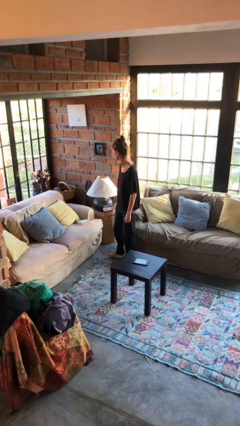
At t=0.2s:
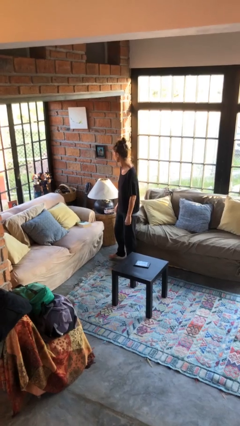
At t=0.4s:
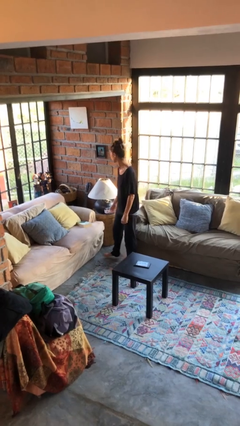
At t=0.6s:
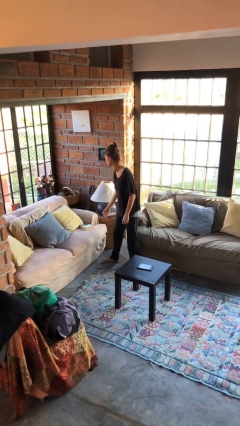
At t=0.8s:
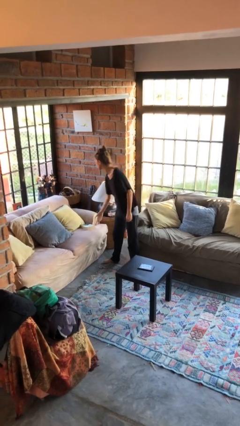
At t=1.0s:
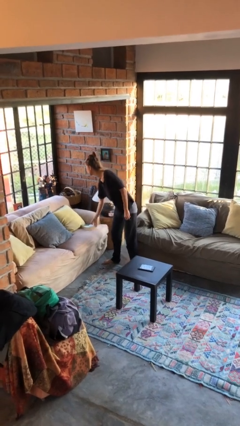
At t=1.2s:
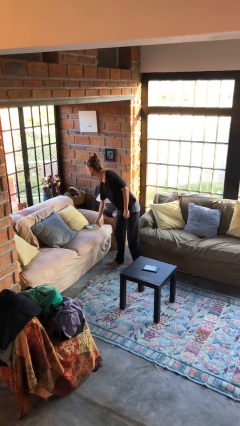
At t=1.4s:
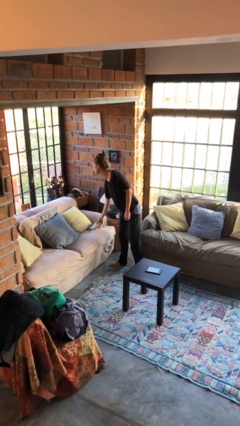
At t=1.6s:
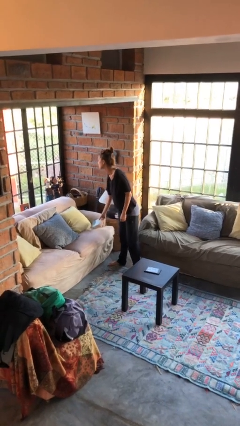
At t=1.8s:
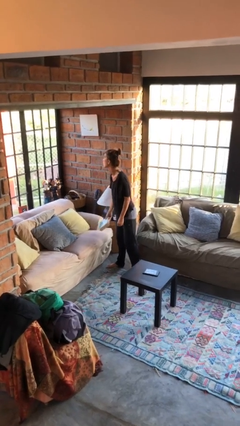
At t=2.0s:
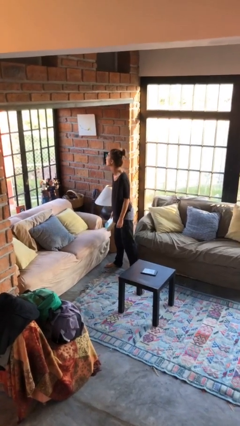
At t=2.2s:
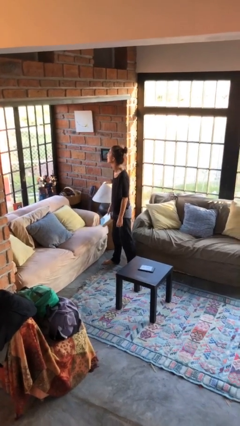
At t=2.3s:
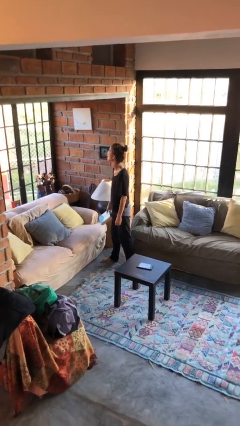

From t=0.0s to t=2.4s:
person picks up object from couch

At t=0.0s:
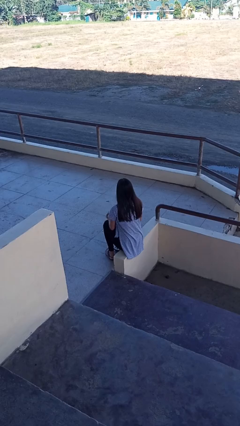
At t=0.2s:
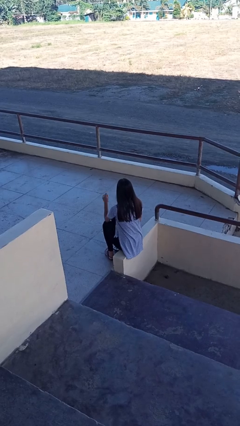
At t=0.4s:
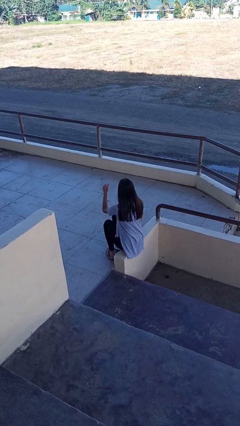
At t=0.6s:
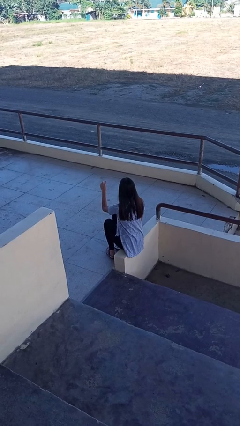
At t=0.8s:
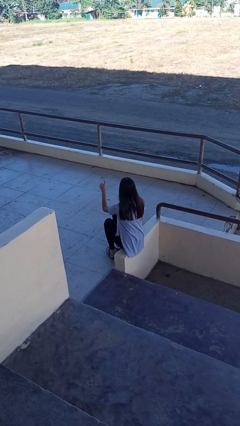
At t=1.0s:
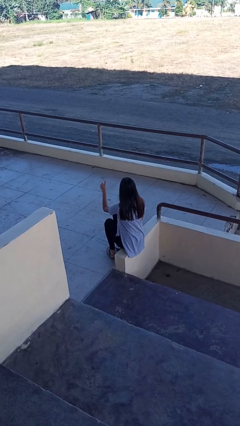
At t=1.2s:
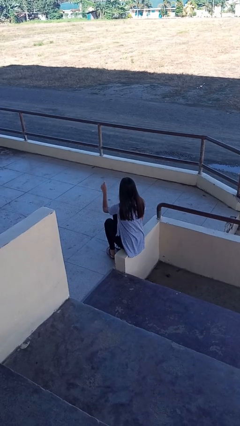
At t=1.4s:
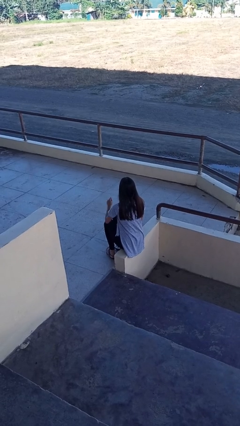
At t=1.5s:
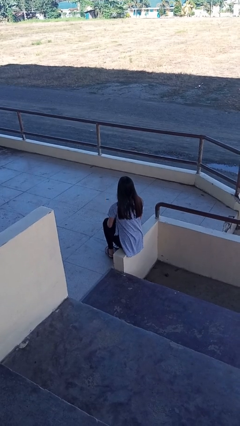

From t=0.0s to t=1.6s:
person gestures number one

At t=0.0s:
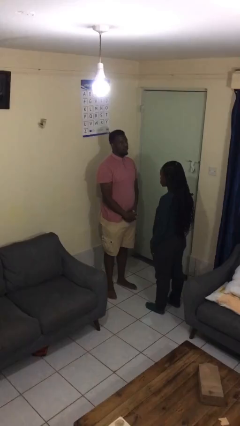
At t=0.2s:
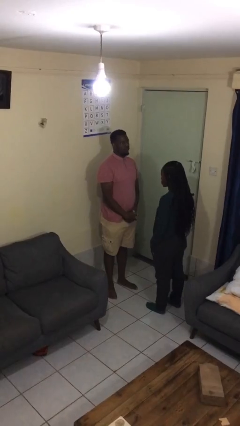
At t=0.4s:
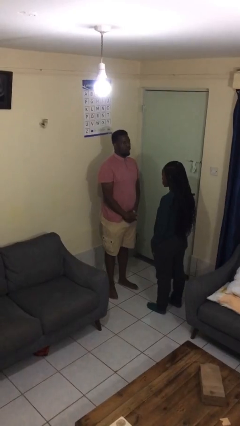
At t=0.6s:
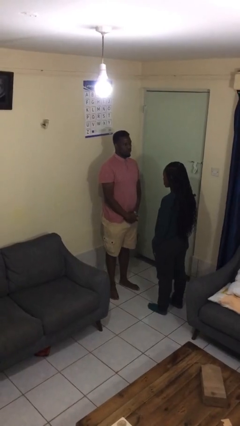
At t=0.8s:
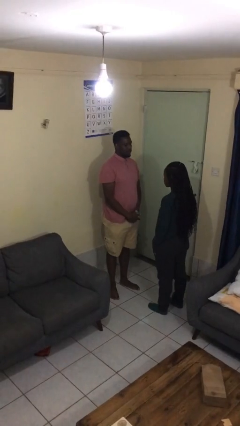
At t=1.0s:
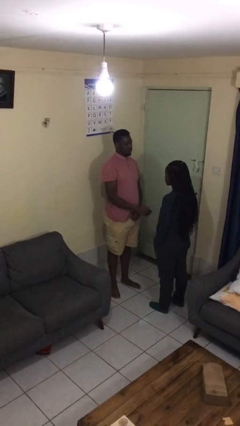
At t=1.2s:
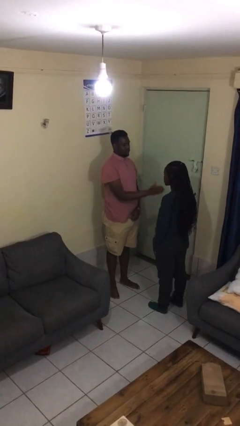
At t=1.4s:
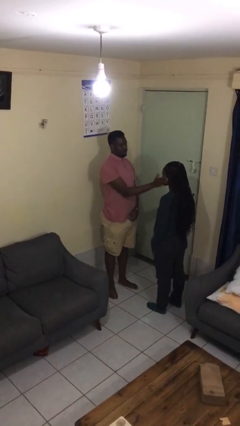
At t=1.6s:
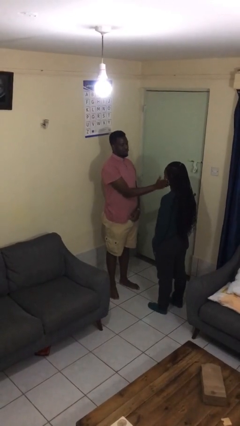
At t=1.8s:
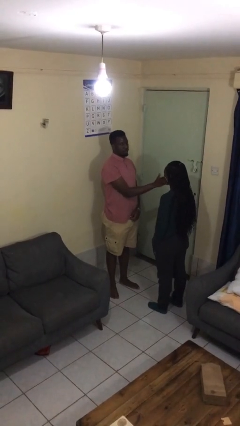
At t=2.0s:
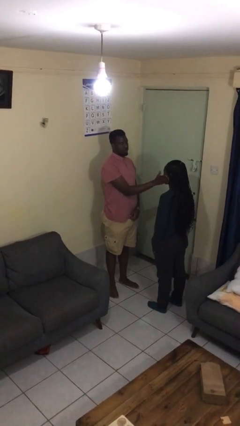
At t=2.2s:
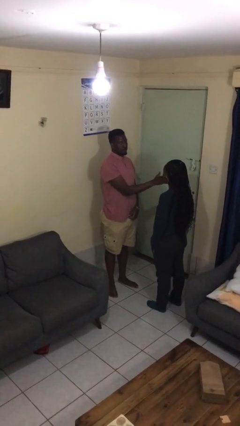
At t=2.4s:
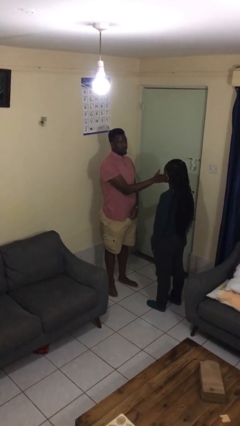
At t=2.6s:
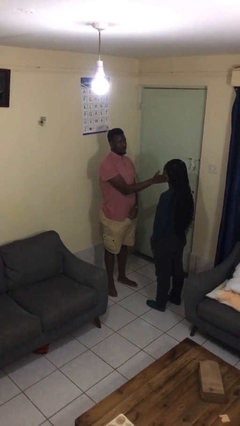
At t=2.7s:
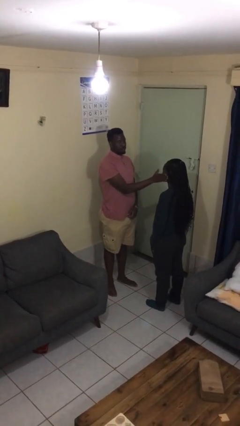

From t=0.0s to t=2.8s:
person touches face of person

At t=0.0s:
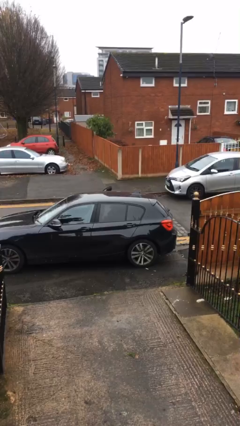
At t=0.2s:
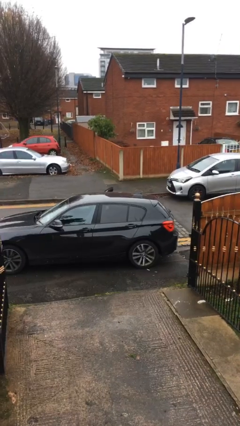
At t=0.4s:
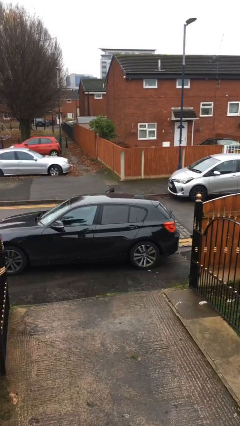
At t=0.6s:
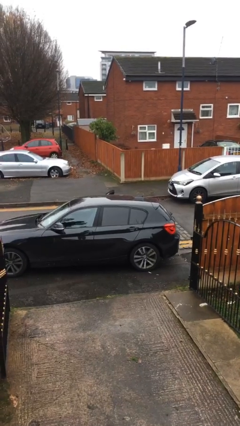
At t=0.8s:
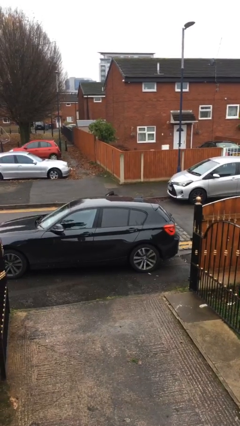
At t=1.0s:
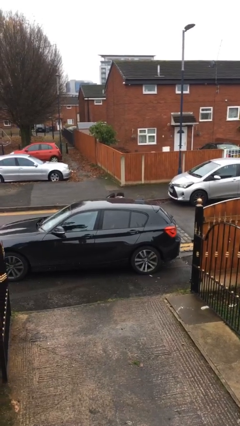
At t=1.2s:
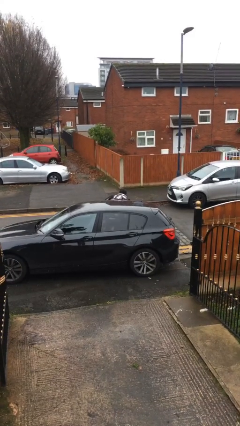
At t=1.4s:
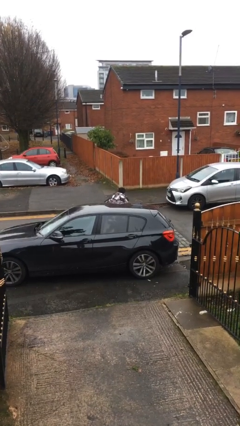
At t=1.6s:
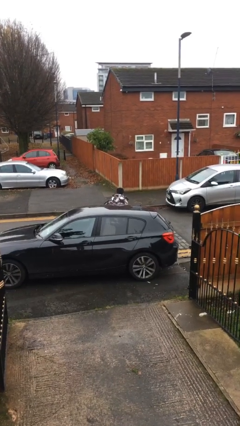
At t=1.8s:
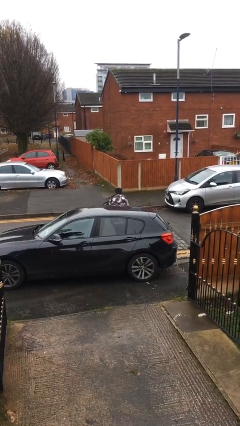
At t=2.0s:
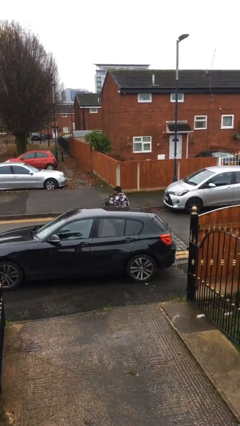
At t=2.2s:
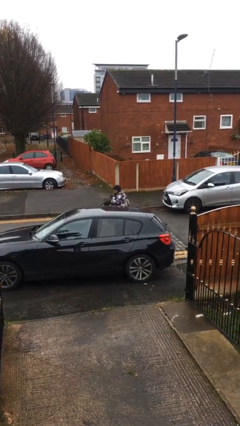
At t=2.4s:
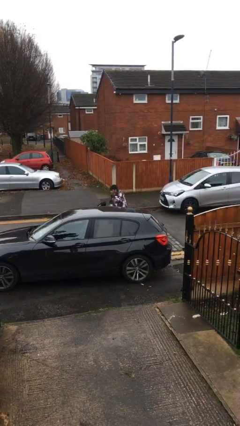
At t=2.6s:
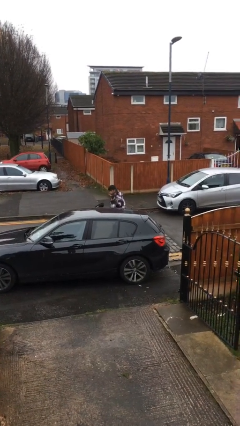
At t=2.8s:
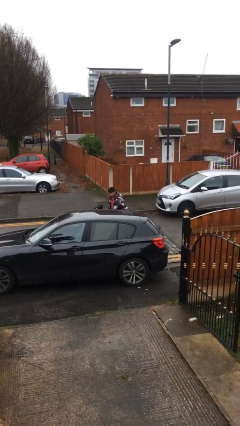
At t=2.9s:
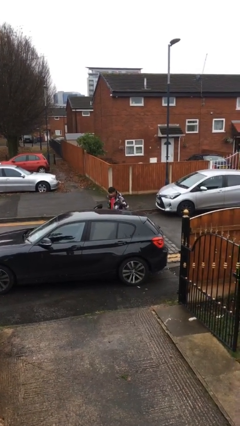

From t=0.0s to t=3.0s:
person exits car

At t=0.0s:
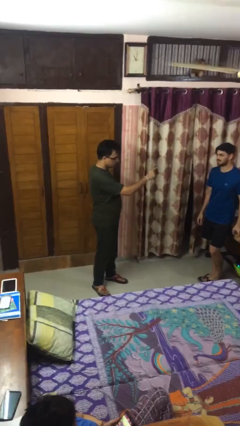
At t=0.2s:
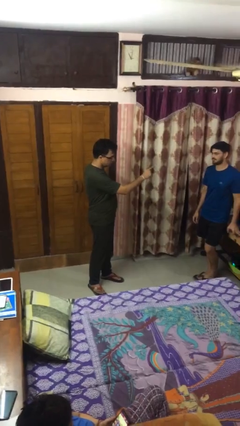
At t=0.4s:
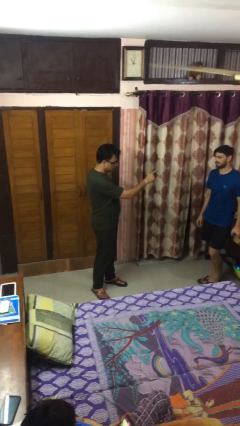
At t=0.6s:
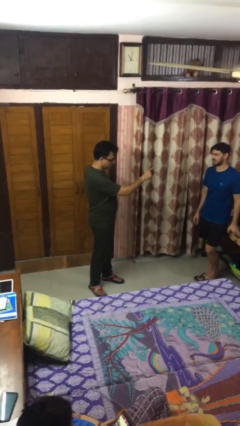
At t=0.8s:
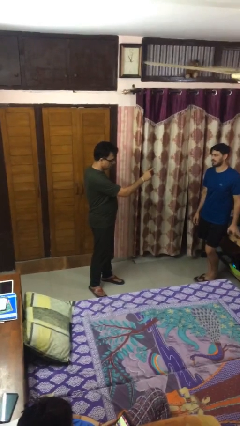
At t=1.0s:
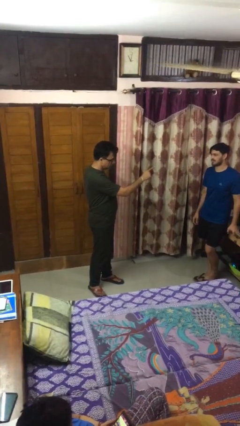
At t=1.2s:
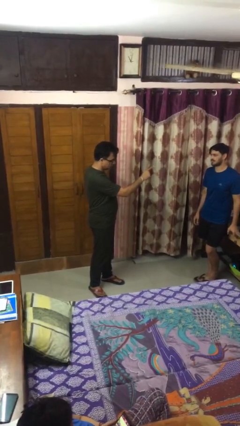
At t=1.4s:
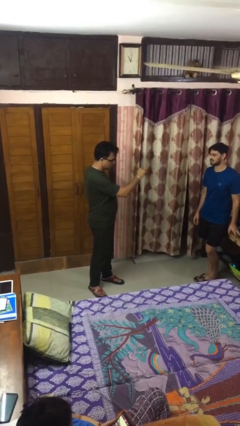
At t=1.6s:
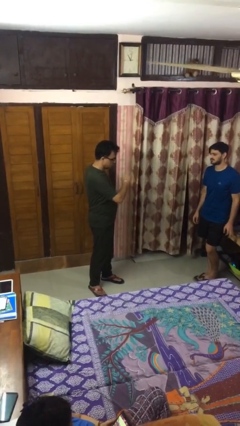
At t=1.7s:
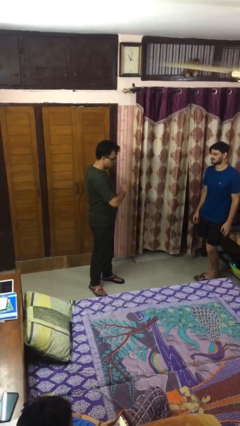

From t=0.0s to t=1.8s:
person points at person

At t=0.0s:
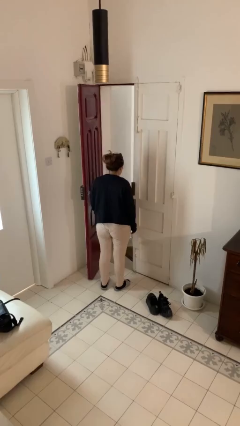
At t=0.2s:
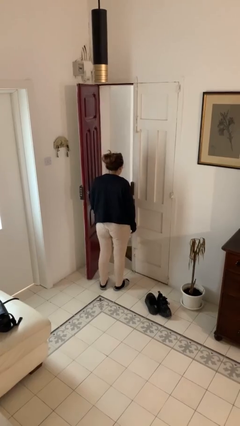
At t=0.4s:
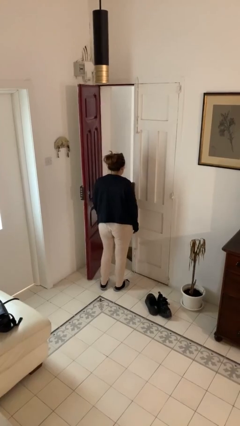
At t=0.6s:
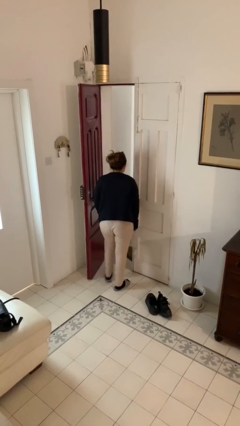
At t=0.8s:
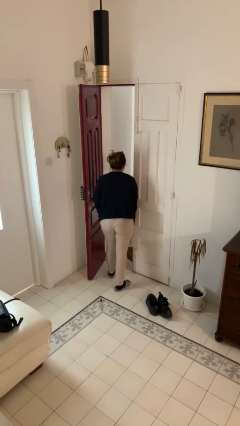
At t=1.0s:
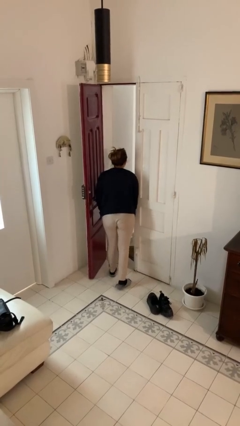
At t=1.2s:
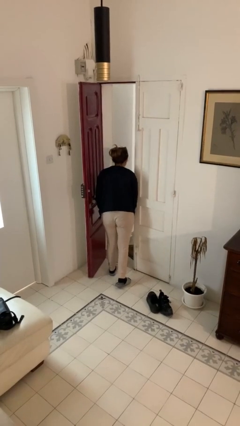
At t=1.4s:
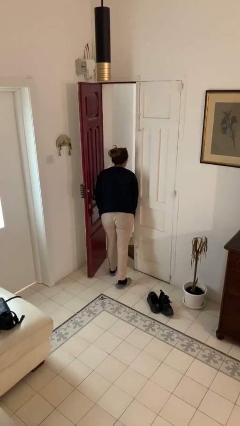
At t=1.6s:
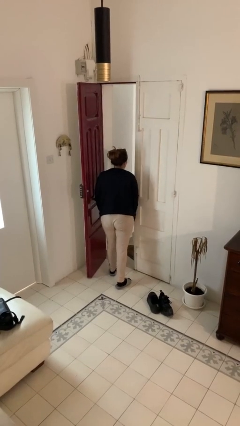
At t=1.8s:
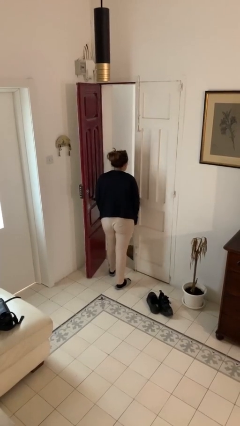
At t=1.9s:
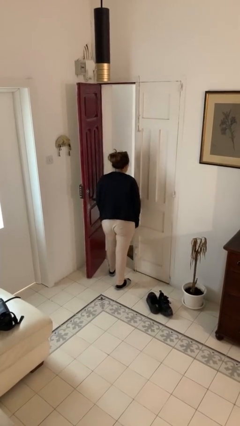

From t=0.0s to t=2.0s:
person bumps into wall

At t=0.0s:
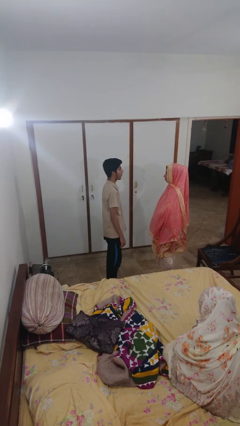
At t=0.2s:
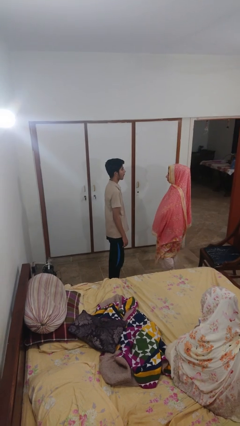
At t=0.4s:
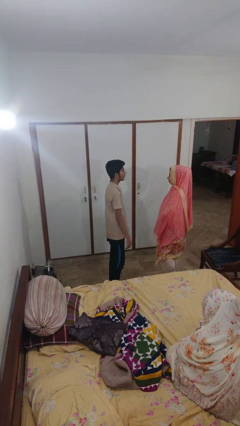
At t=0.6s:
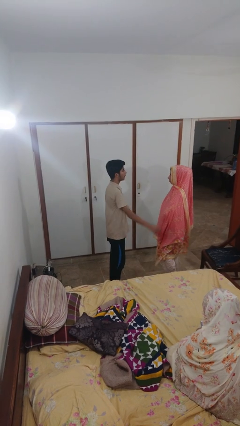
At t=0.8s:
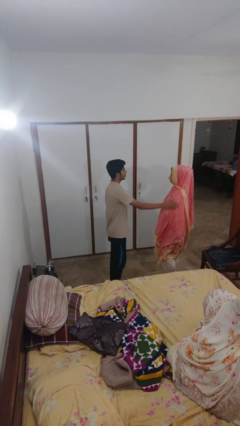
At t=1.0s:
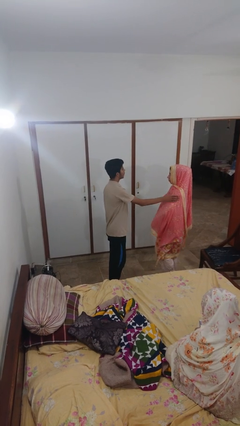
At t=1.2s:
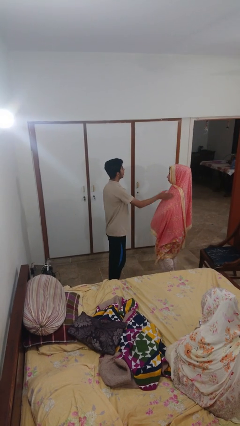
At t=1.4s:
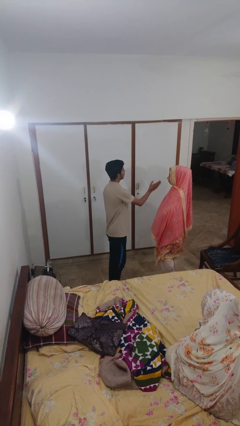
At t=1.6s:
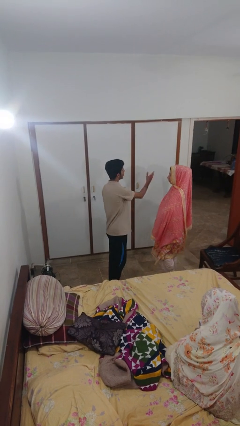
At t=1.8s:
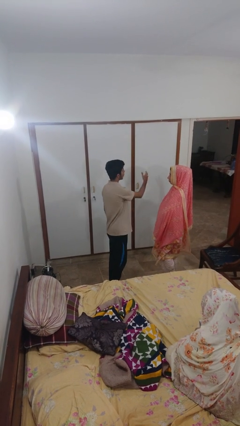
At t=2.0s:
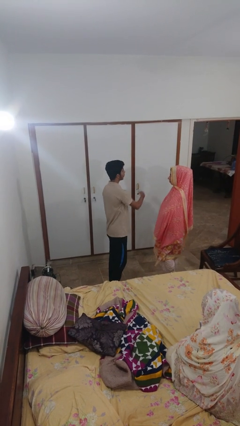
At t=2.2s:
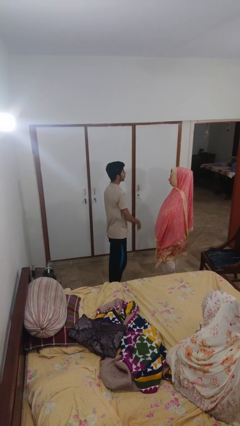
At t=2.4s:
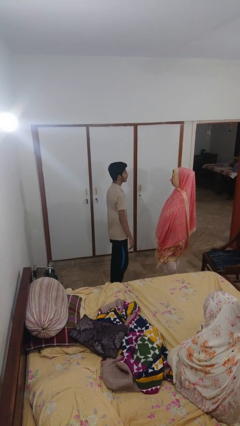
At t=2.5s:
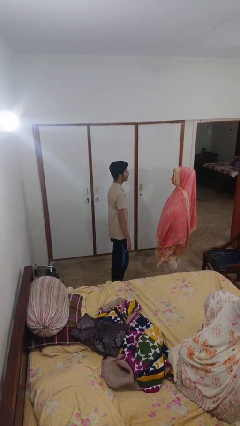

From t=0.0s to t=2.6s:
person shoves person

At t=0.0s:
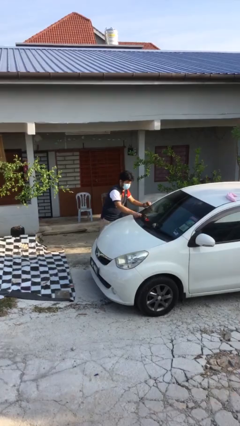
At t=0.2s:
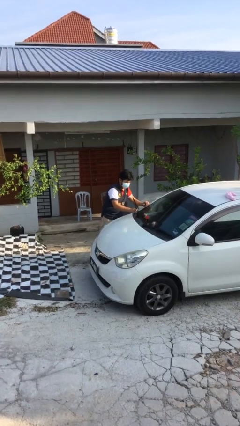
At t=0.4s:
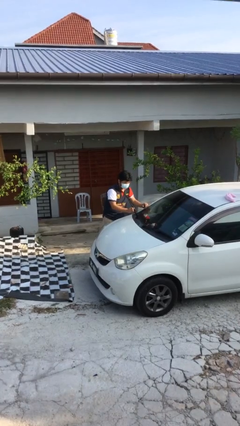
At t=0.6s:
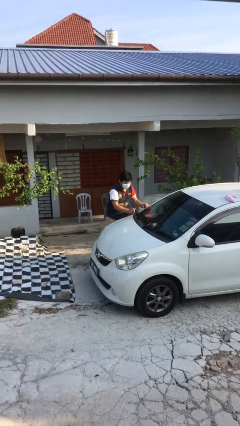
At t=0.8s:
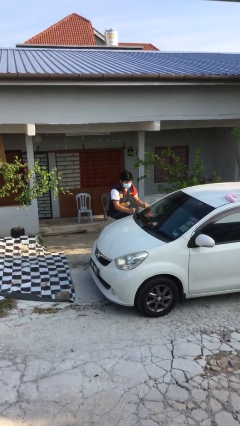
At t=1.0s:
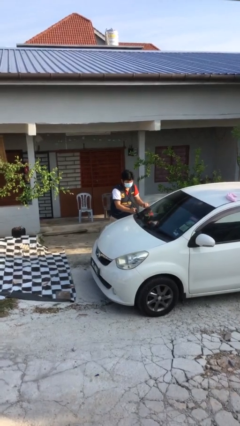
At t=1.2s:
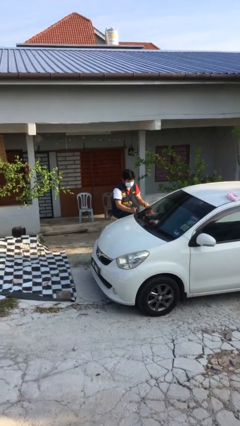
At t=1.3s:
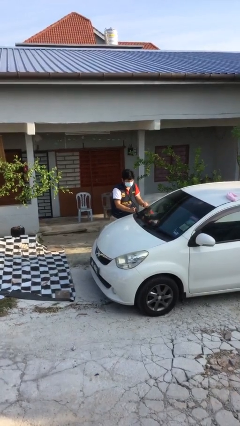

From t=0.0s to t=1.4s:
person flips up car wipers
